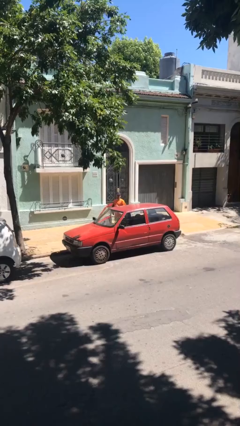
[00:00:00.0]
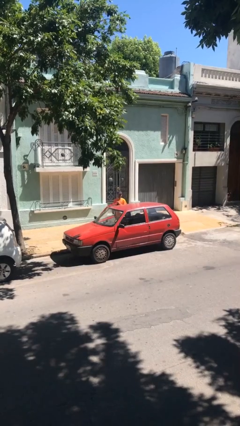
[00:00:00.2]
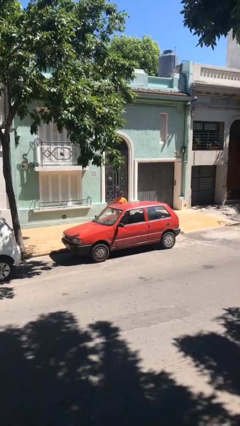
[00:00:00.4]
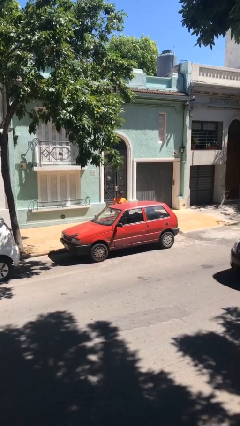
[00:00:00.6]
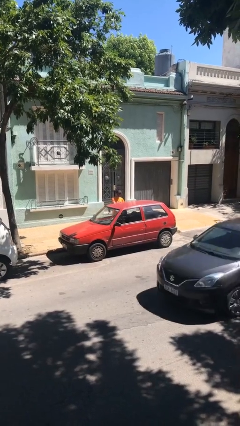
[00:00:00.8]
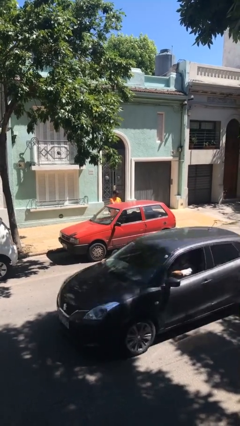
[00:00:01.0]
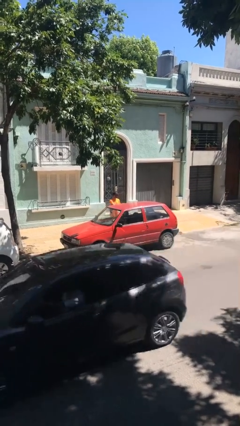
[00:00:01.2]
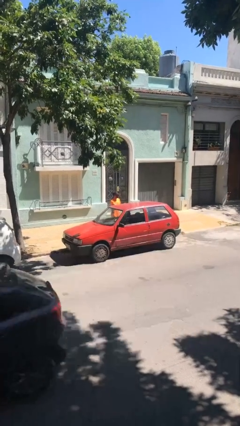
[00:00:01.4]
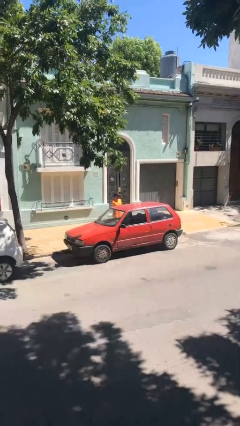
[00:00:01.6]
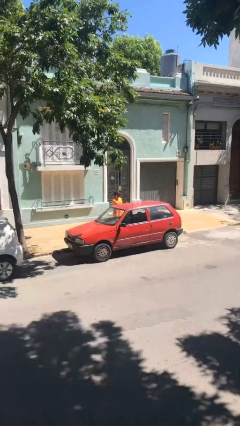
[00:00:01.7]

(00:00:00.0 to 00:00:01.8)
person closes car door

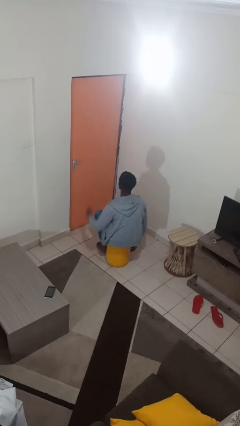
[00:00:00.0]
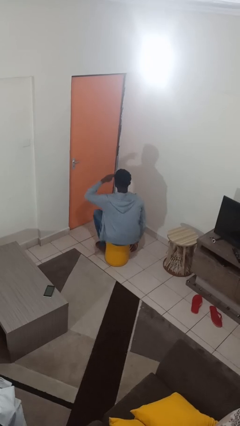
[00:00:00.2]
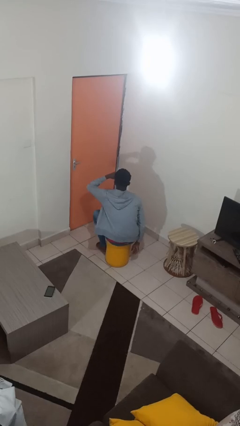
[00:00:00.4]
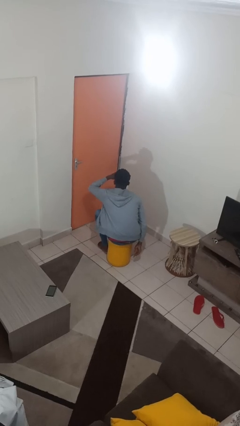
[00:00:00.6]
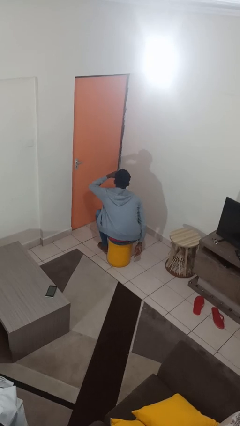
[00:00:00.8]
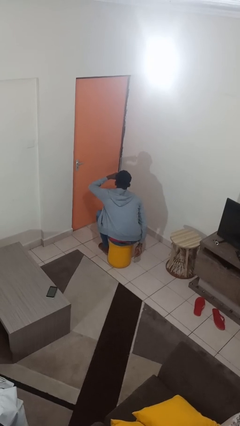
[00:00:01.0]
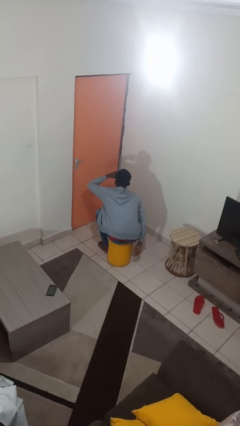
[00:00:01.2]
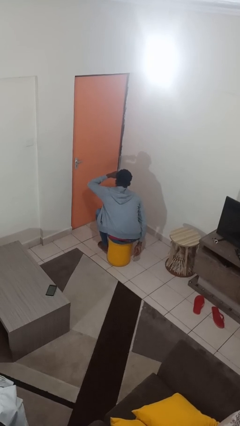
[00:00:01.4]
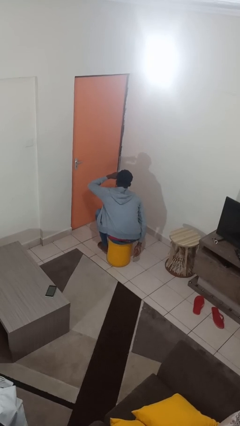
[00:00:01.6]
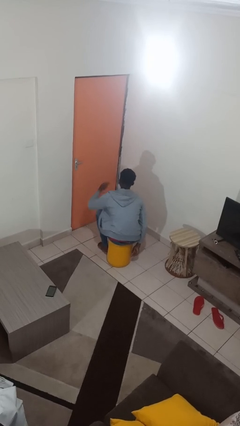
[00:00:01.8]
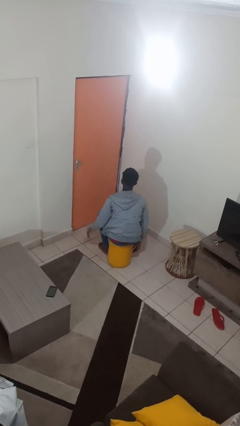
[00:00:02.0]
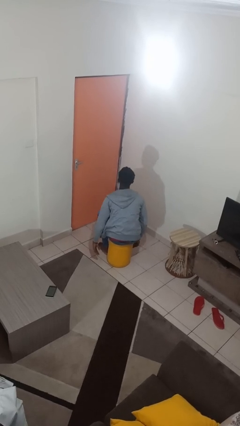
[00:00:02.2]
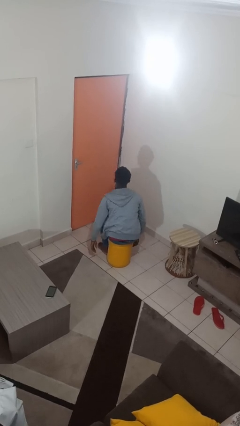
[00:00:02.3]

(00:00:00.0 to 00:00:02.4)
person shades eyes

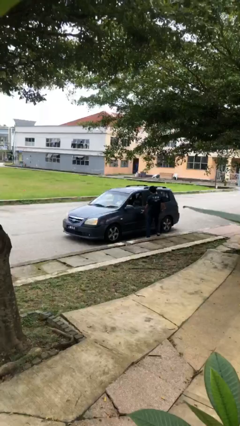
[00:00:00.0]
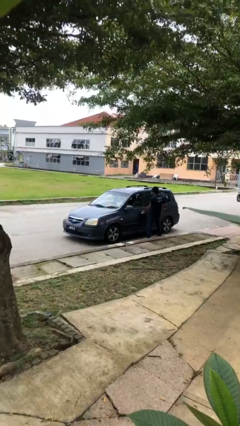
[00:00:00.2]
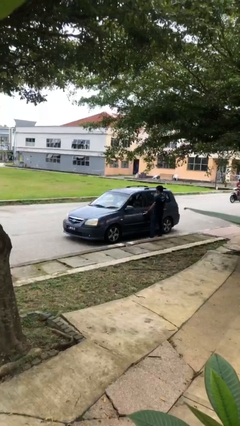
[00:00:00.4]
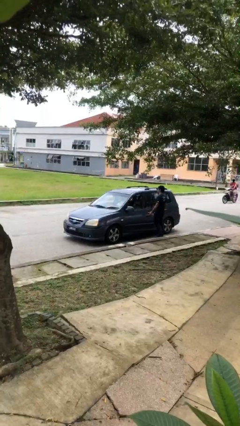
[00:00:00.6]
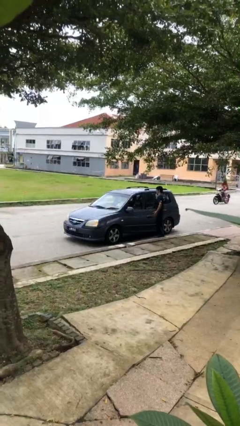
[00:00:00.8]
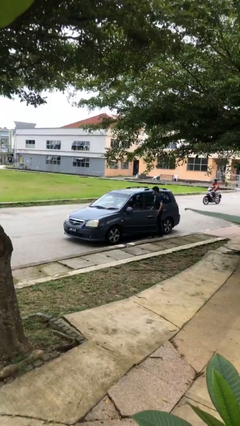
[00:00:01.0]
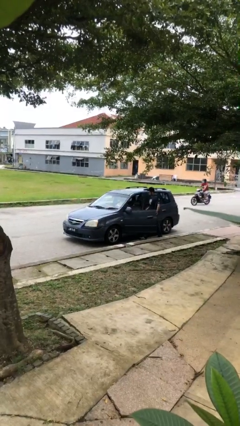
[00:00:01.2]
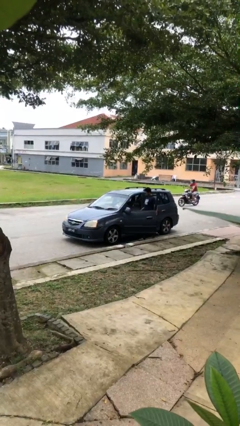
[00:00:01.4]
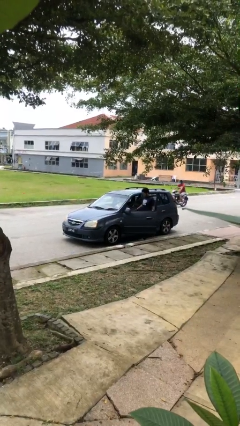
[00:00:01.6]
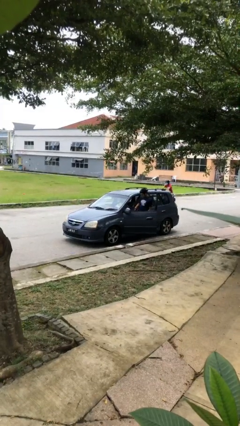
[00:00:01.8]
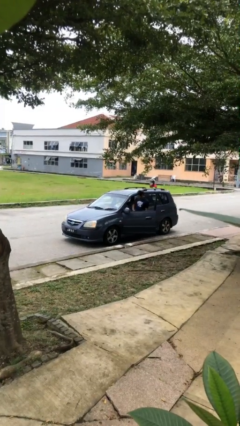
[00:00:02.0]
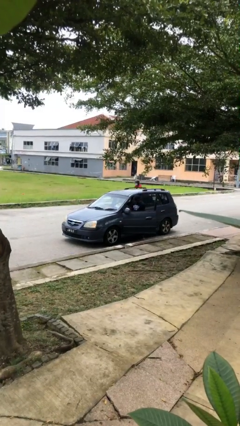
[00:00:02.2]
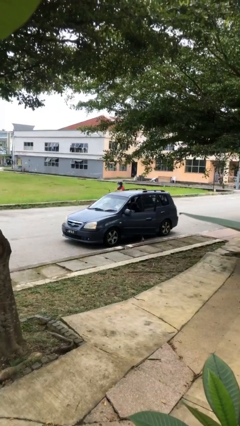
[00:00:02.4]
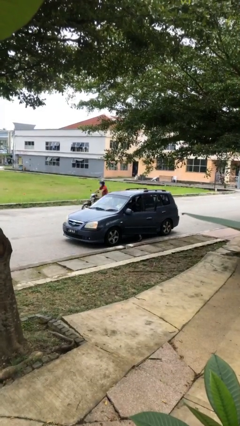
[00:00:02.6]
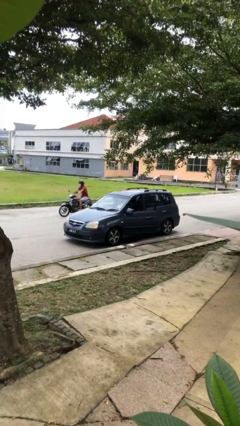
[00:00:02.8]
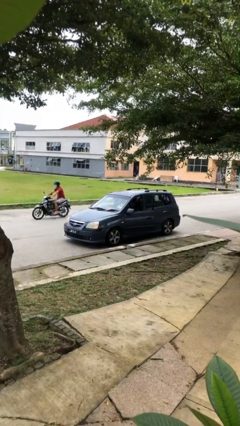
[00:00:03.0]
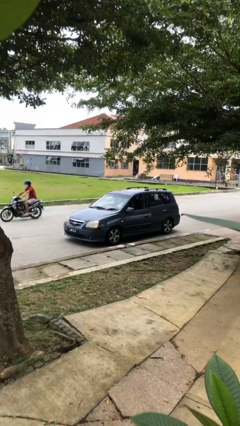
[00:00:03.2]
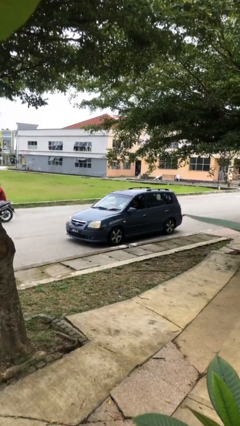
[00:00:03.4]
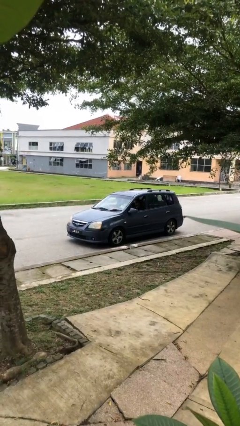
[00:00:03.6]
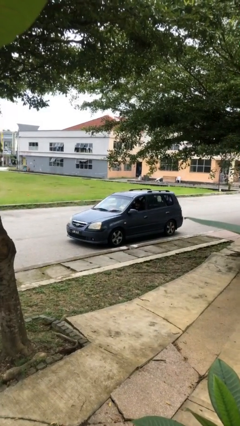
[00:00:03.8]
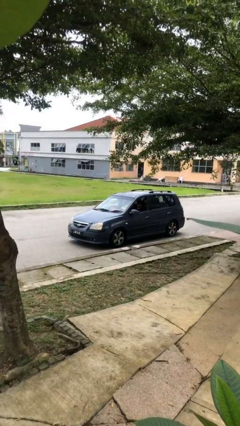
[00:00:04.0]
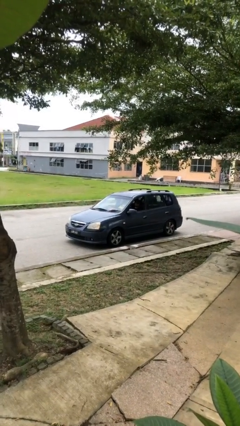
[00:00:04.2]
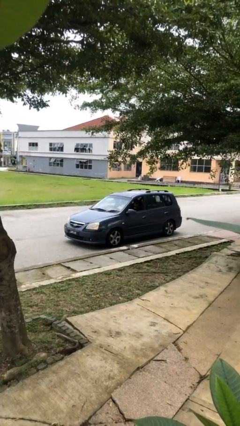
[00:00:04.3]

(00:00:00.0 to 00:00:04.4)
car picks up person

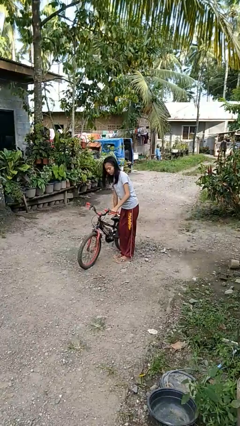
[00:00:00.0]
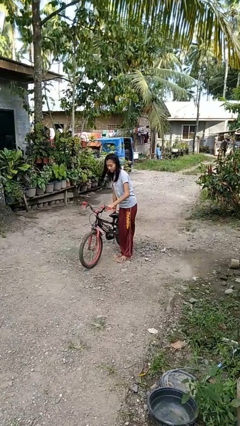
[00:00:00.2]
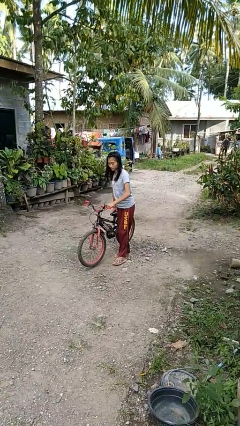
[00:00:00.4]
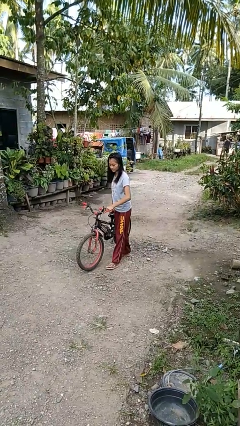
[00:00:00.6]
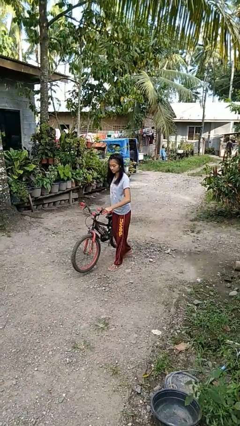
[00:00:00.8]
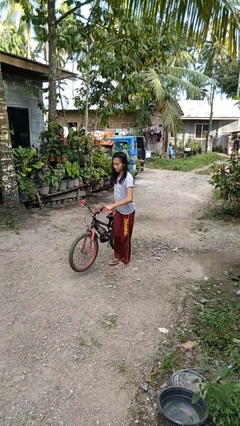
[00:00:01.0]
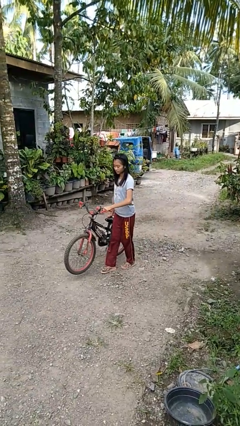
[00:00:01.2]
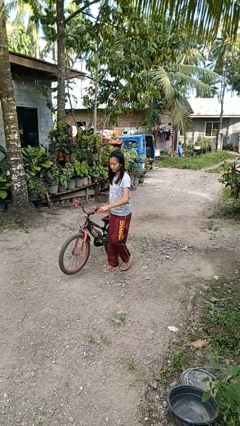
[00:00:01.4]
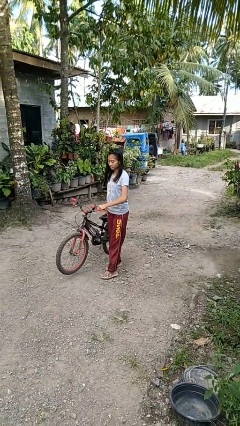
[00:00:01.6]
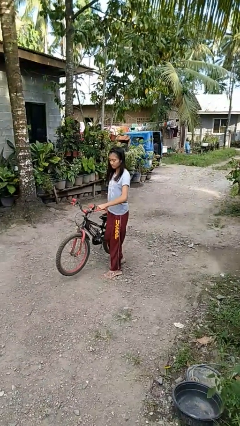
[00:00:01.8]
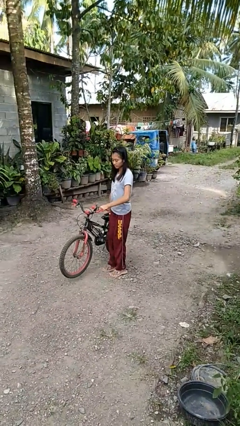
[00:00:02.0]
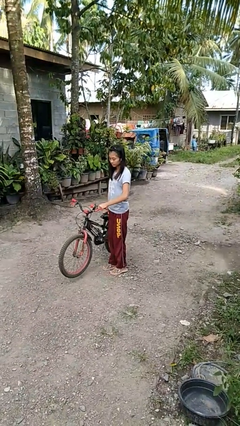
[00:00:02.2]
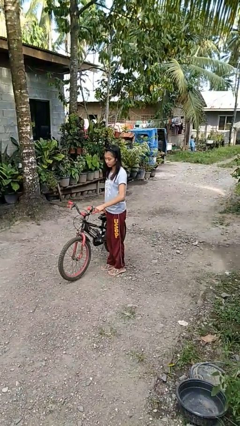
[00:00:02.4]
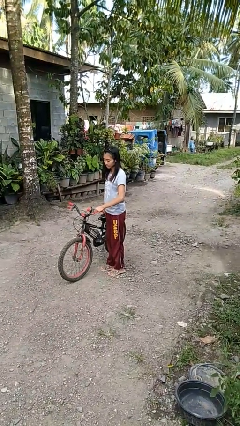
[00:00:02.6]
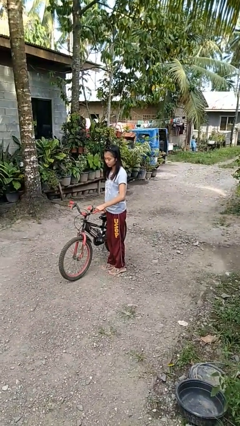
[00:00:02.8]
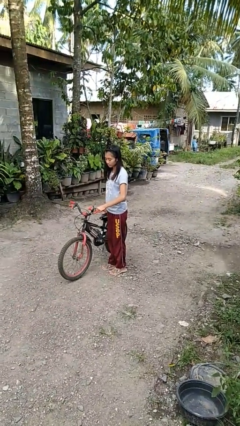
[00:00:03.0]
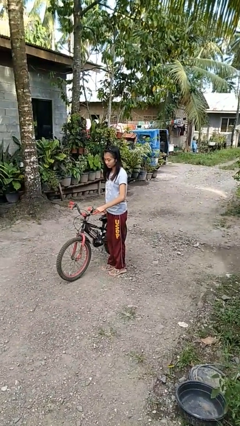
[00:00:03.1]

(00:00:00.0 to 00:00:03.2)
person carries bicycle

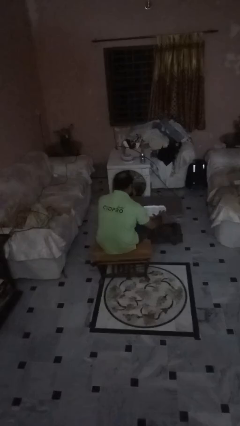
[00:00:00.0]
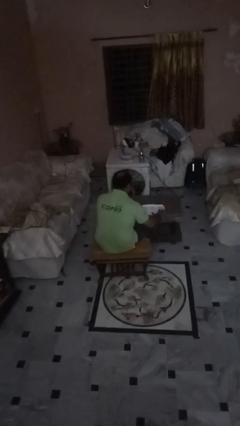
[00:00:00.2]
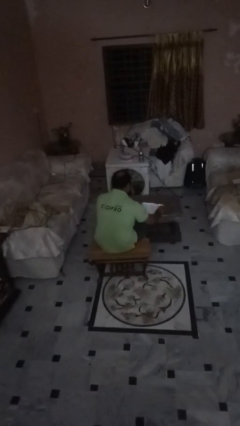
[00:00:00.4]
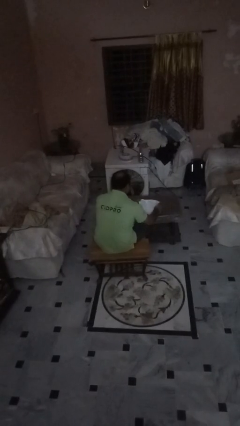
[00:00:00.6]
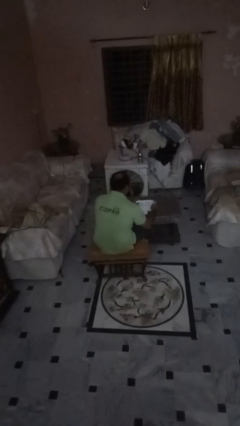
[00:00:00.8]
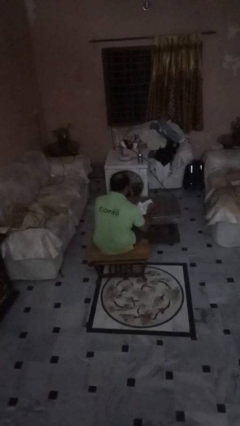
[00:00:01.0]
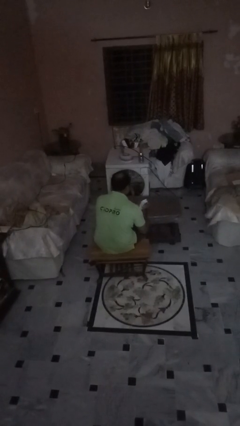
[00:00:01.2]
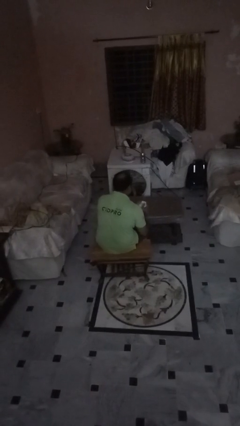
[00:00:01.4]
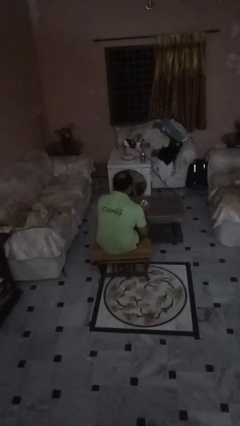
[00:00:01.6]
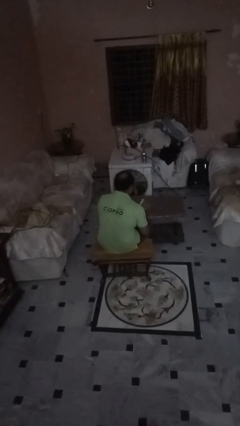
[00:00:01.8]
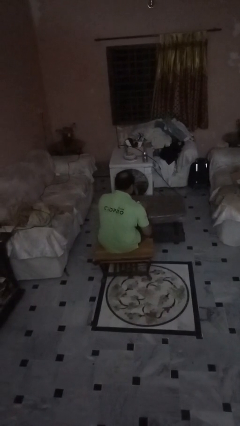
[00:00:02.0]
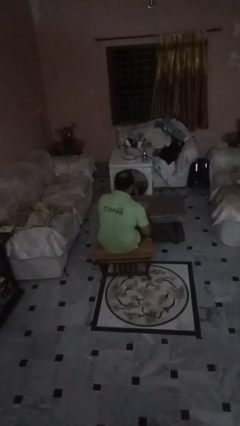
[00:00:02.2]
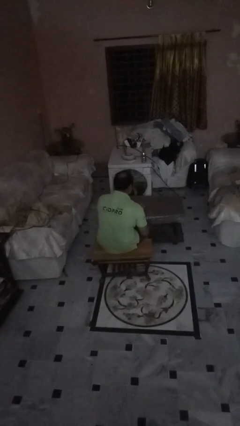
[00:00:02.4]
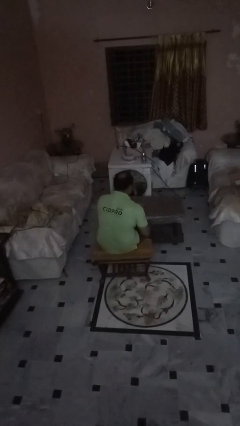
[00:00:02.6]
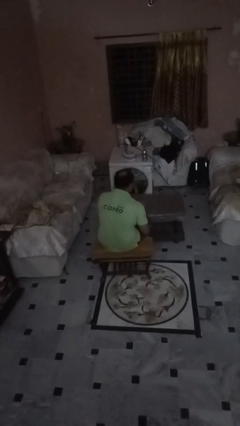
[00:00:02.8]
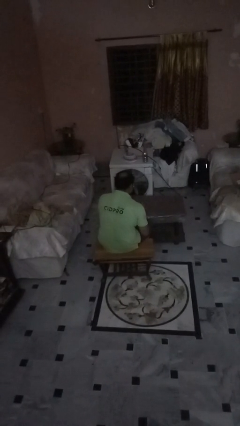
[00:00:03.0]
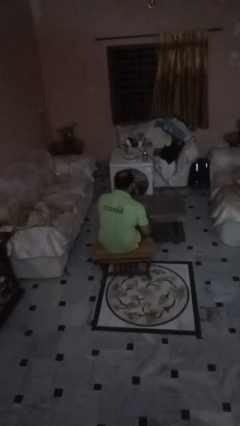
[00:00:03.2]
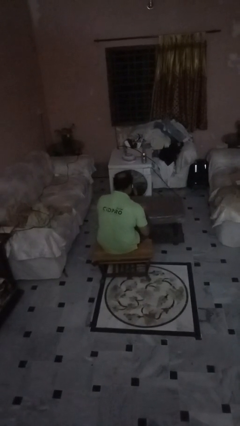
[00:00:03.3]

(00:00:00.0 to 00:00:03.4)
person crumples paper

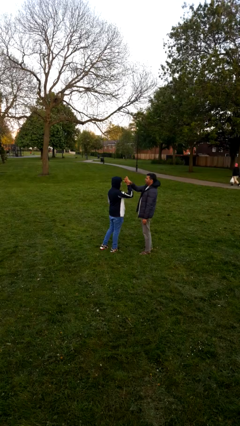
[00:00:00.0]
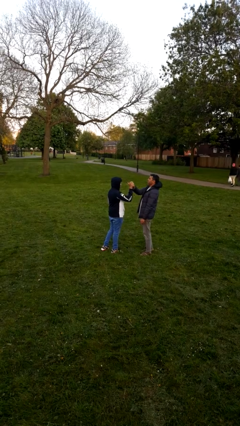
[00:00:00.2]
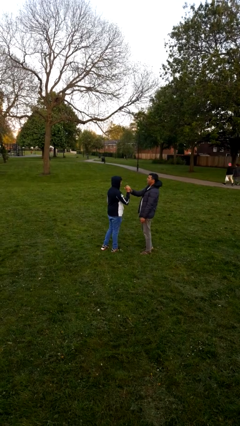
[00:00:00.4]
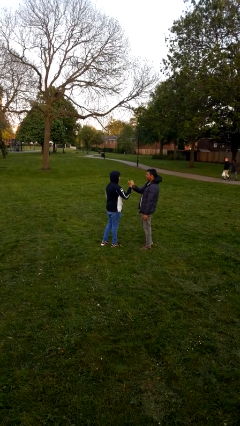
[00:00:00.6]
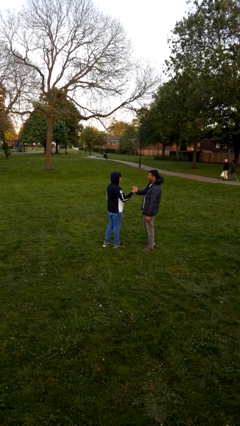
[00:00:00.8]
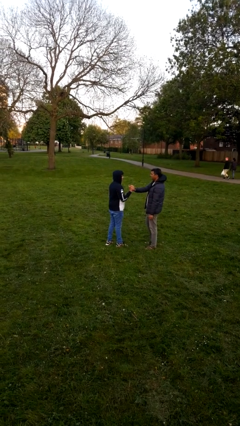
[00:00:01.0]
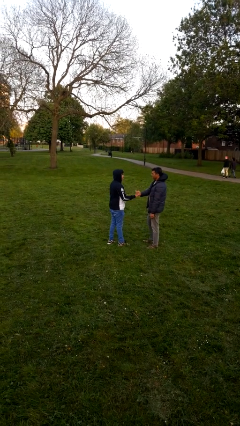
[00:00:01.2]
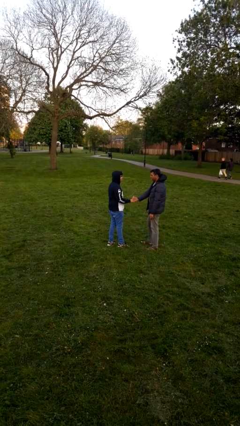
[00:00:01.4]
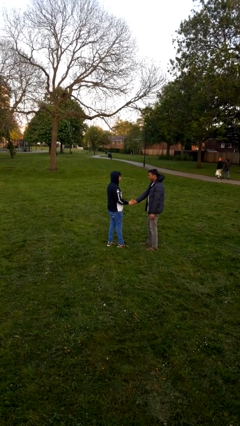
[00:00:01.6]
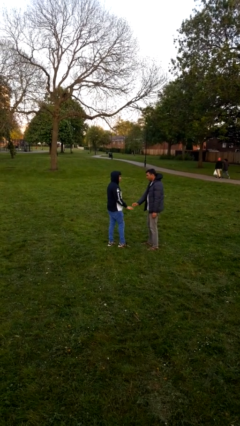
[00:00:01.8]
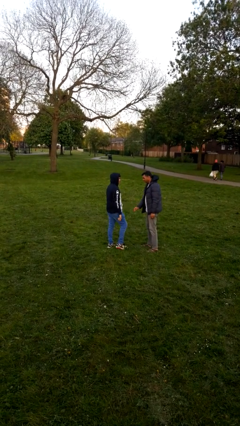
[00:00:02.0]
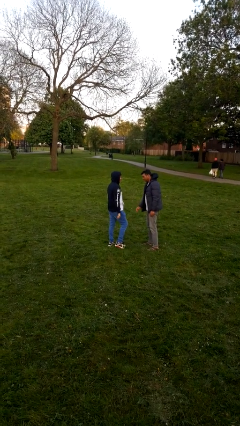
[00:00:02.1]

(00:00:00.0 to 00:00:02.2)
person highfives hand
